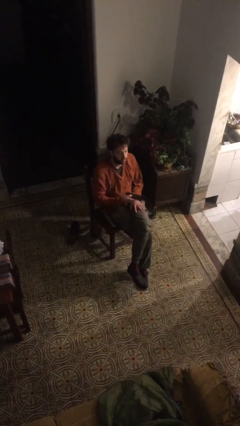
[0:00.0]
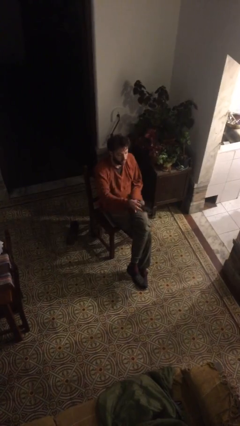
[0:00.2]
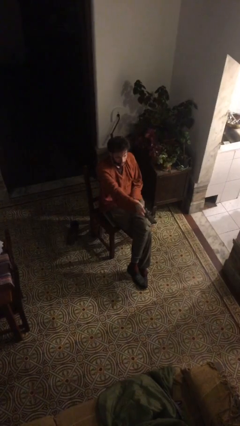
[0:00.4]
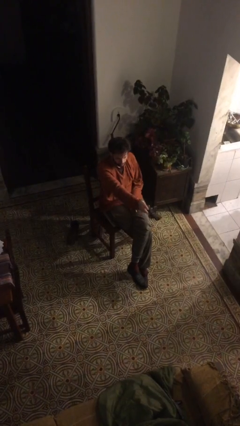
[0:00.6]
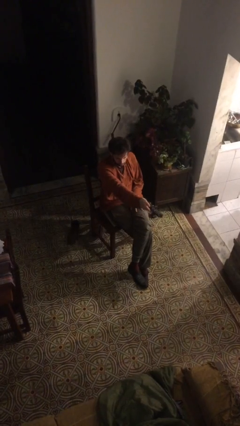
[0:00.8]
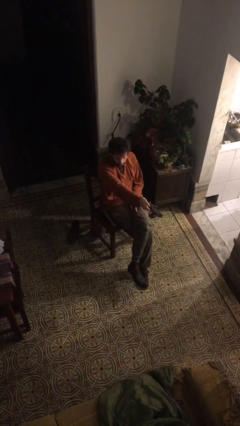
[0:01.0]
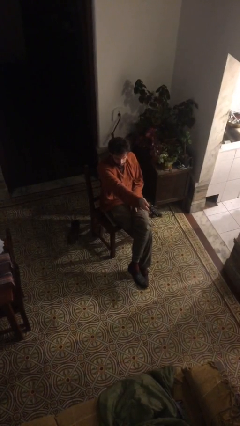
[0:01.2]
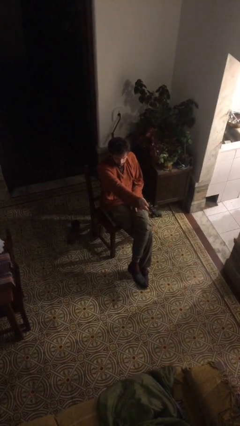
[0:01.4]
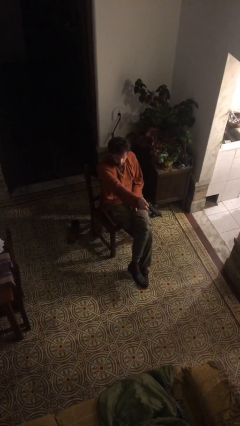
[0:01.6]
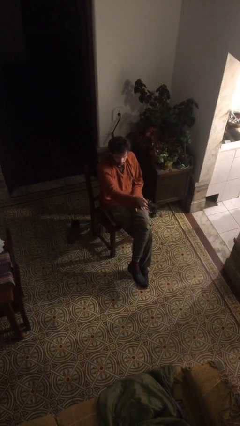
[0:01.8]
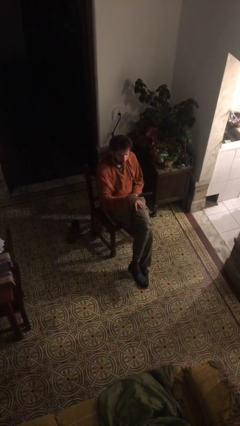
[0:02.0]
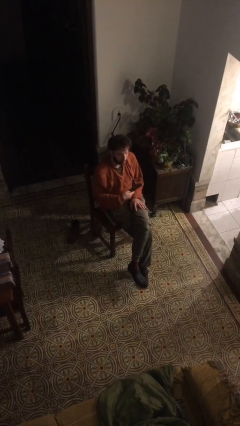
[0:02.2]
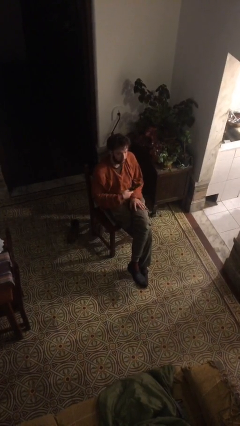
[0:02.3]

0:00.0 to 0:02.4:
person uses television remote

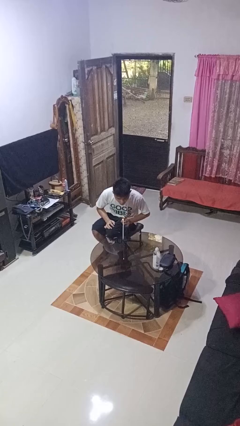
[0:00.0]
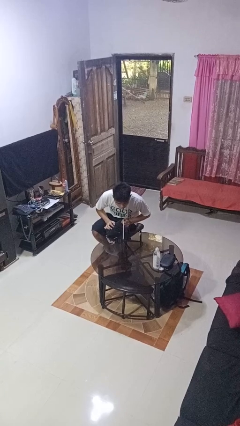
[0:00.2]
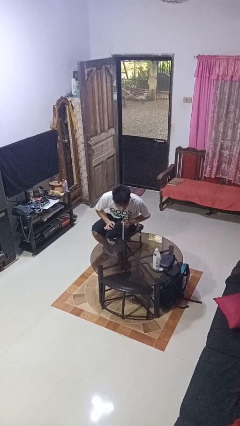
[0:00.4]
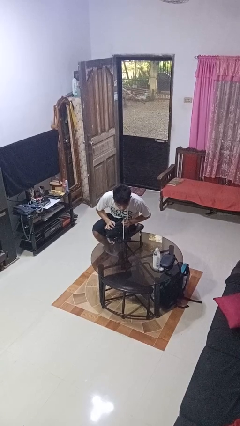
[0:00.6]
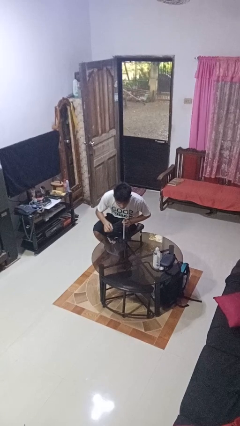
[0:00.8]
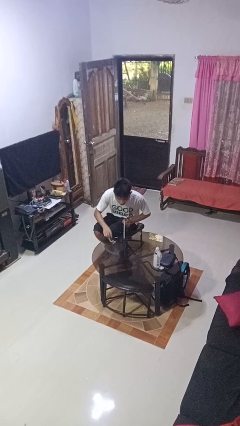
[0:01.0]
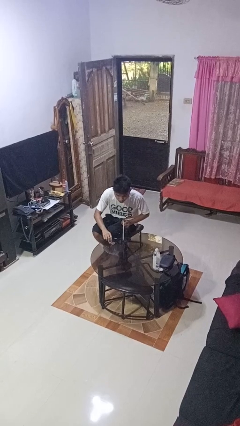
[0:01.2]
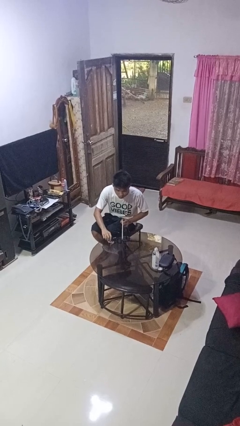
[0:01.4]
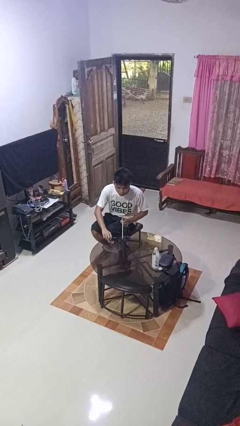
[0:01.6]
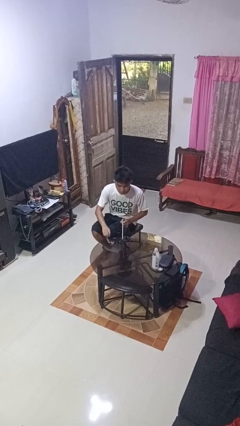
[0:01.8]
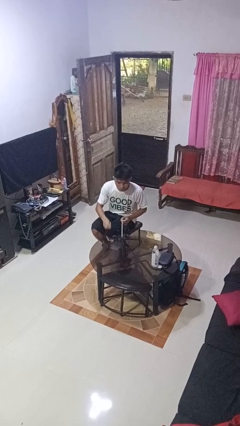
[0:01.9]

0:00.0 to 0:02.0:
person extinguishes candle

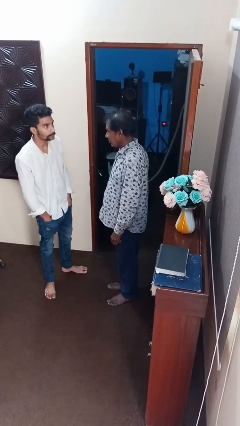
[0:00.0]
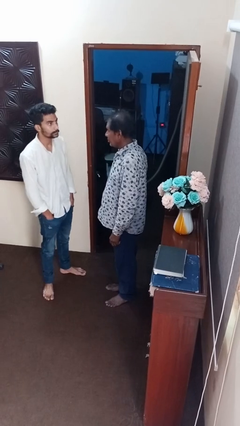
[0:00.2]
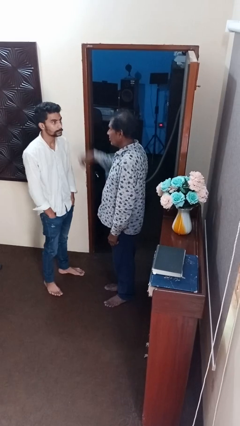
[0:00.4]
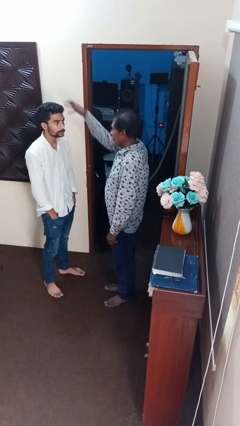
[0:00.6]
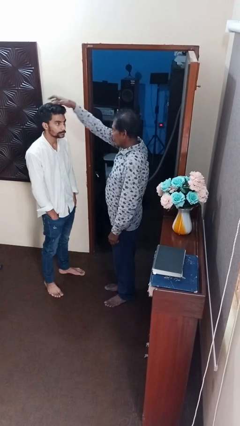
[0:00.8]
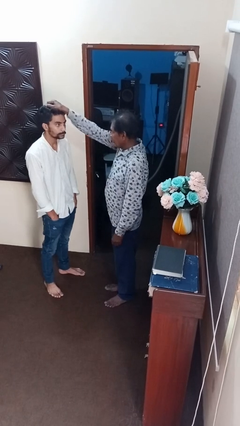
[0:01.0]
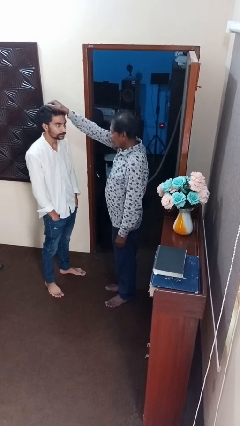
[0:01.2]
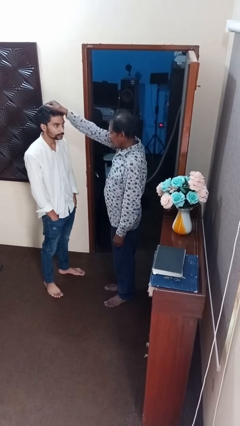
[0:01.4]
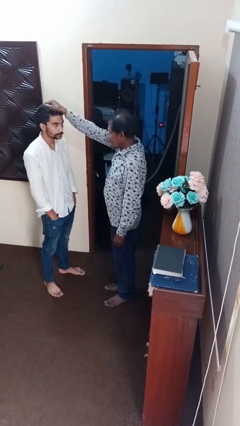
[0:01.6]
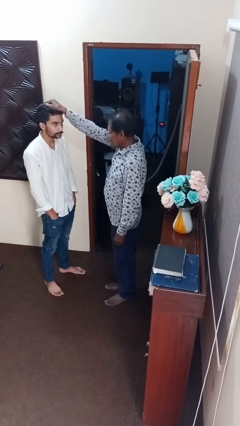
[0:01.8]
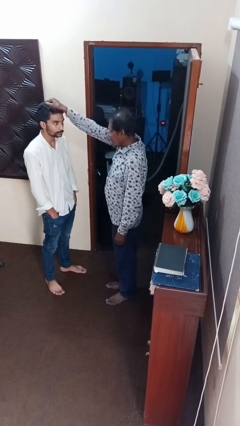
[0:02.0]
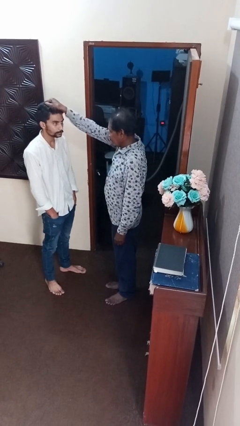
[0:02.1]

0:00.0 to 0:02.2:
person grabs person by hair

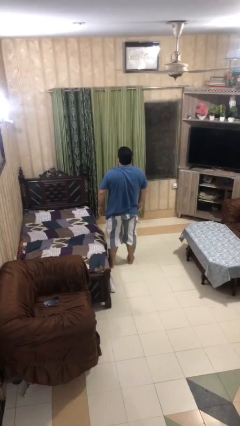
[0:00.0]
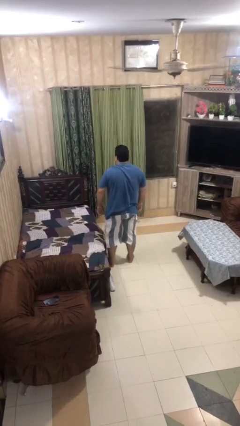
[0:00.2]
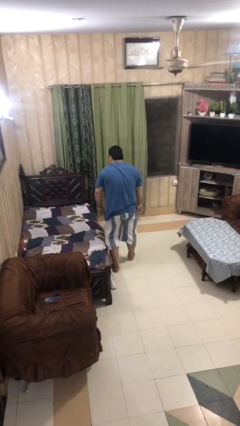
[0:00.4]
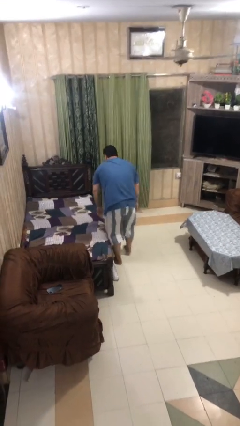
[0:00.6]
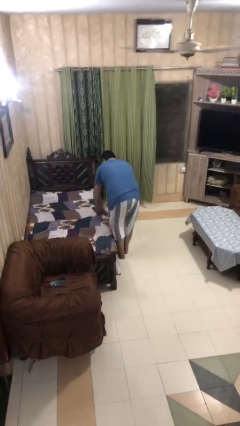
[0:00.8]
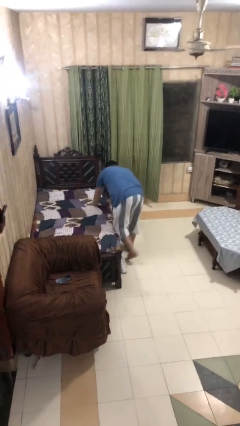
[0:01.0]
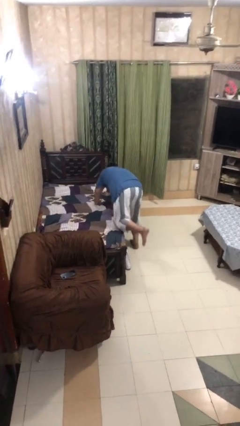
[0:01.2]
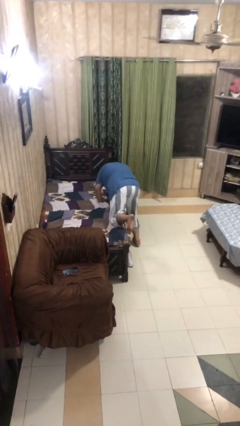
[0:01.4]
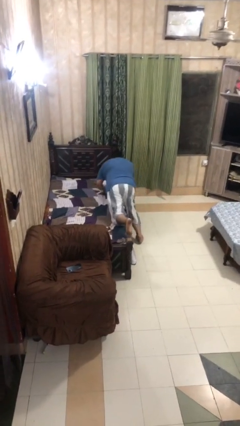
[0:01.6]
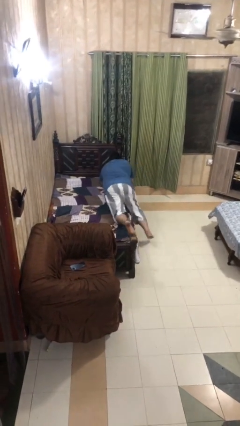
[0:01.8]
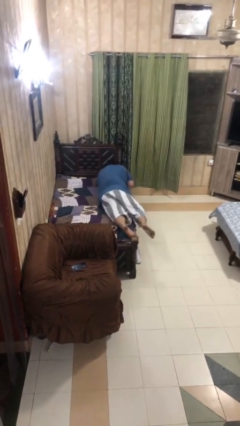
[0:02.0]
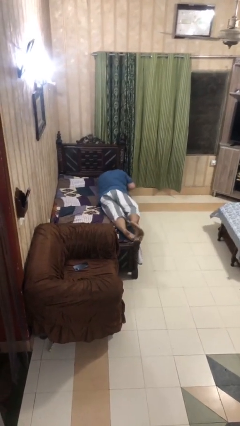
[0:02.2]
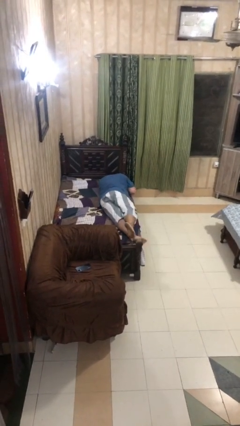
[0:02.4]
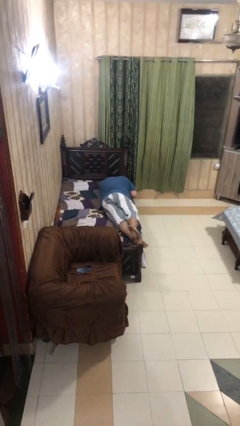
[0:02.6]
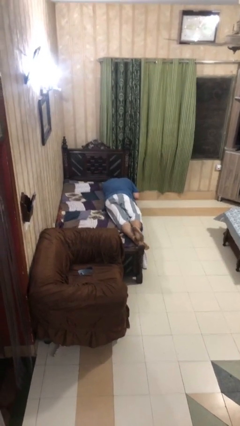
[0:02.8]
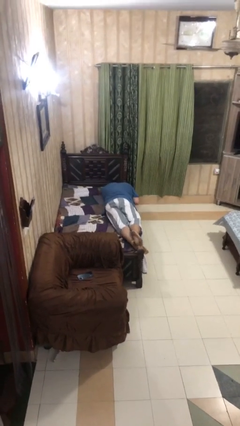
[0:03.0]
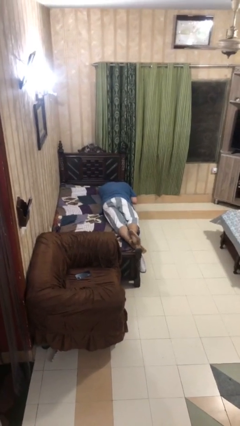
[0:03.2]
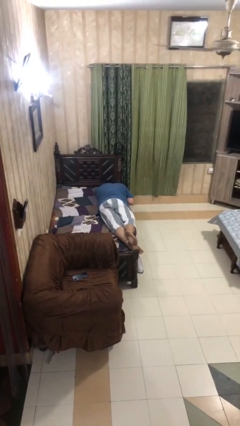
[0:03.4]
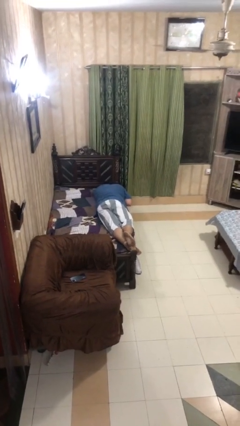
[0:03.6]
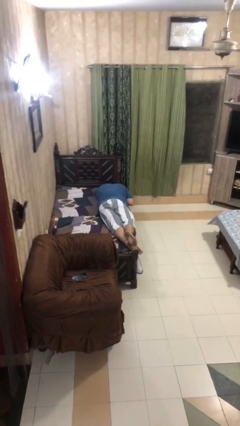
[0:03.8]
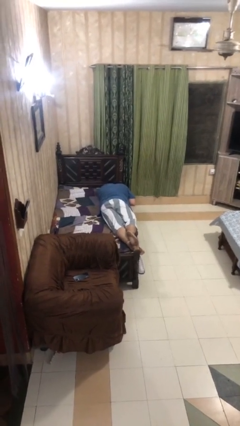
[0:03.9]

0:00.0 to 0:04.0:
person lies down on bed

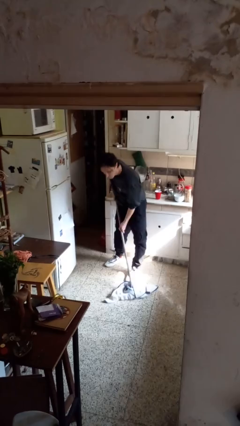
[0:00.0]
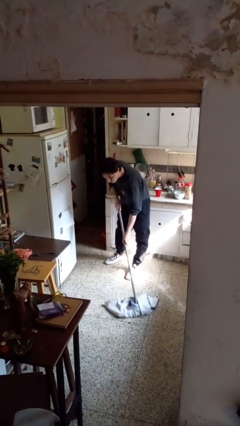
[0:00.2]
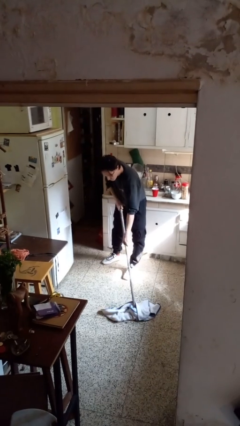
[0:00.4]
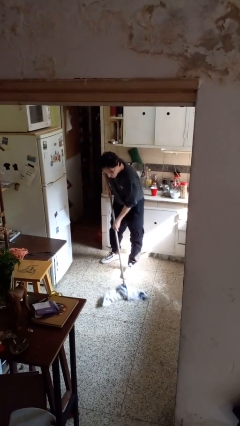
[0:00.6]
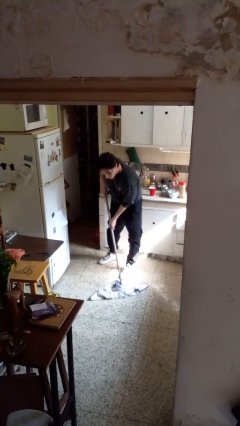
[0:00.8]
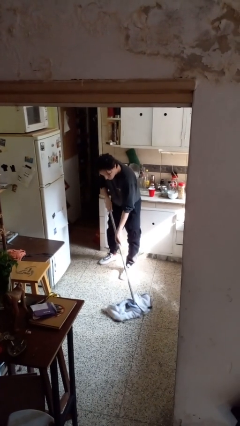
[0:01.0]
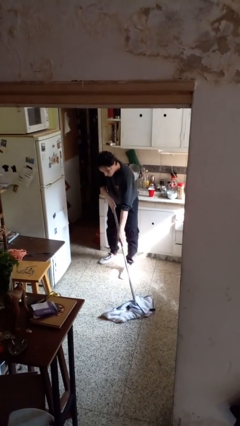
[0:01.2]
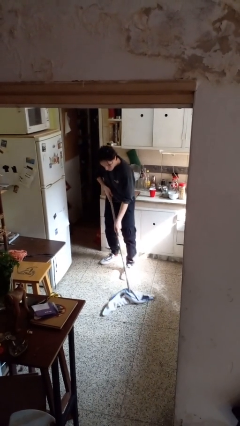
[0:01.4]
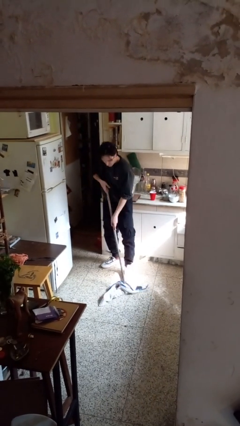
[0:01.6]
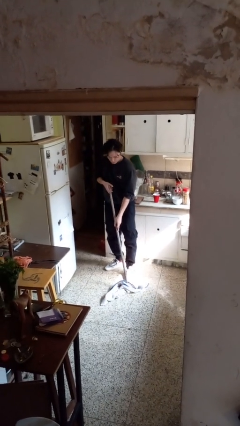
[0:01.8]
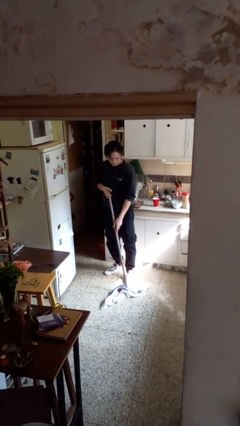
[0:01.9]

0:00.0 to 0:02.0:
person mops

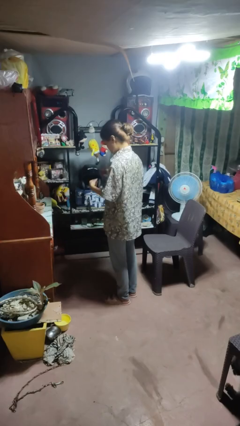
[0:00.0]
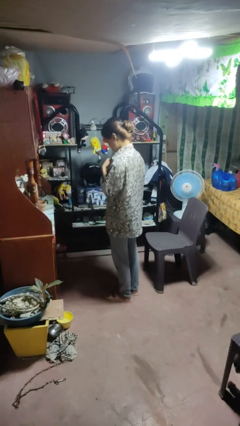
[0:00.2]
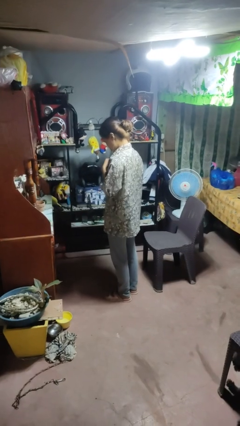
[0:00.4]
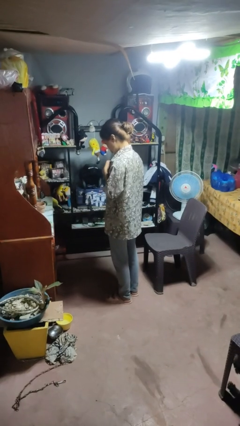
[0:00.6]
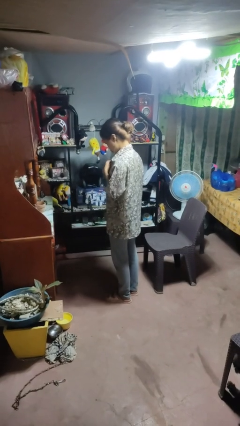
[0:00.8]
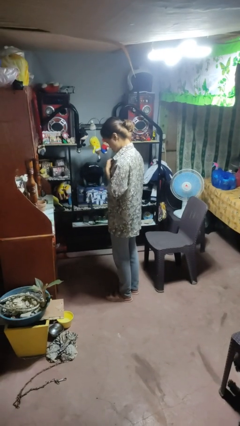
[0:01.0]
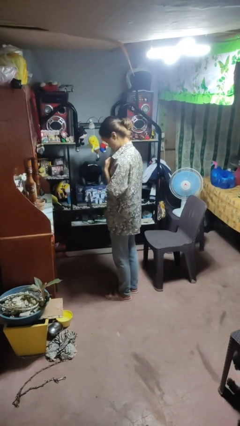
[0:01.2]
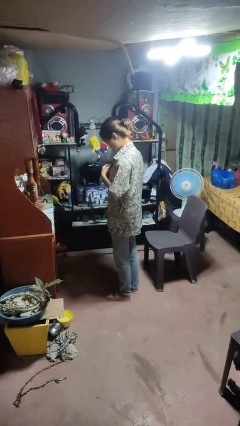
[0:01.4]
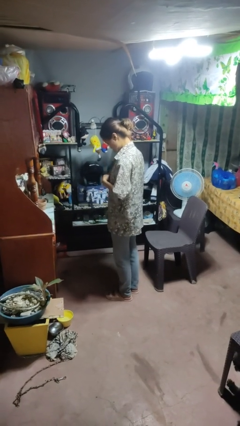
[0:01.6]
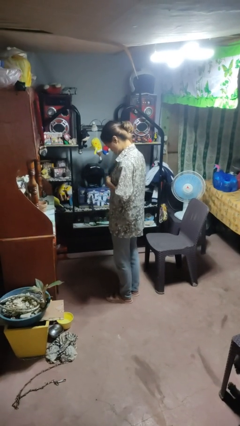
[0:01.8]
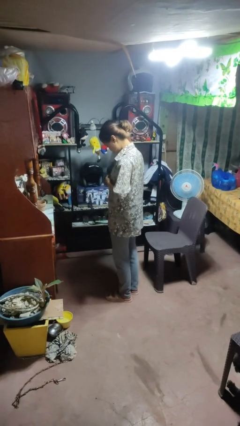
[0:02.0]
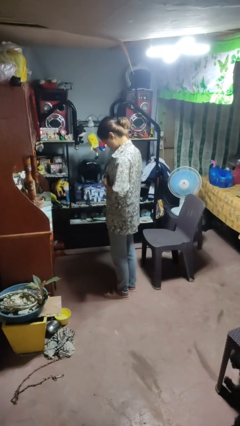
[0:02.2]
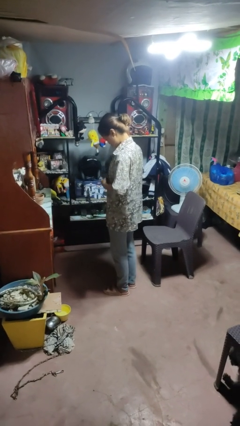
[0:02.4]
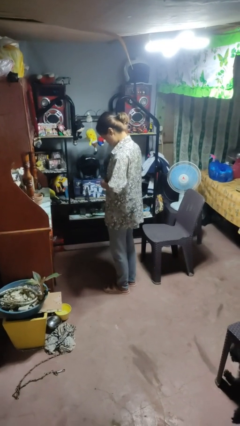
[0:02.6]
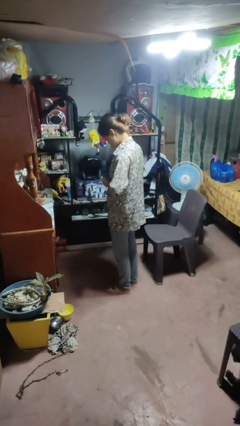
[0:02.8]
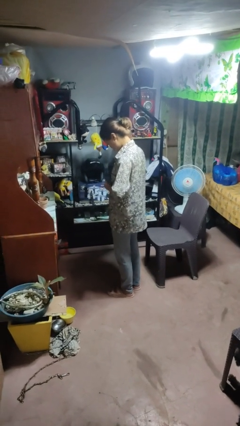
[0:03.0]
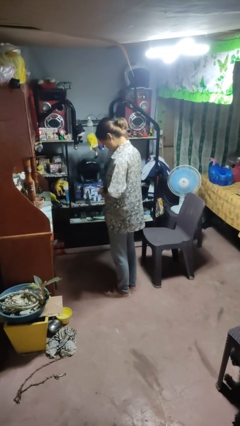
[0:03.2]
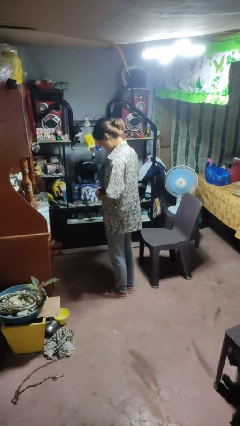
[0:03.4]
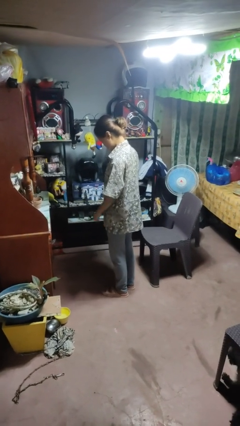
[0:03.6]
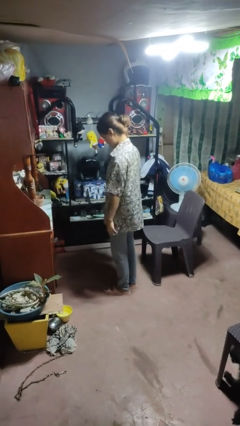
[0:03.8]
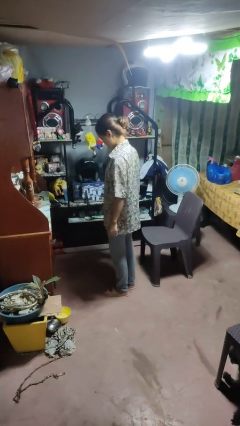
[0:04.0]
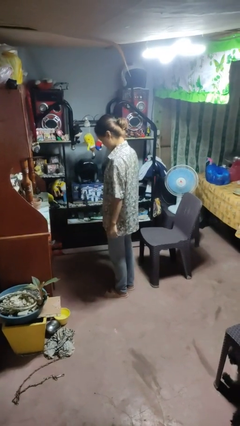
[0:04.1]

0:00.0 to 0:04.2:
person unbuttons shirt

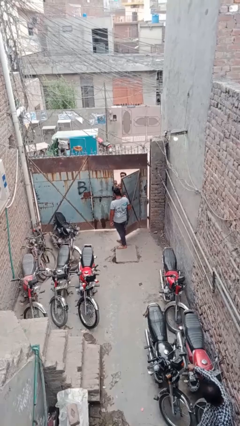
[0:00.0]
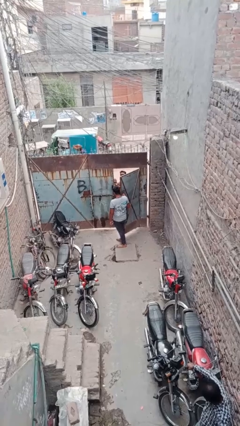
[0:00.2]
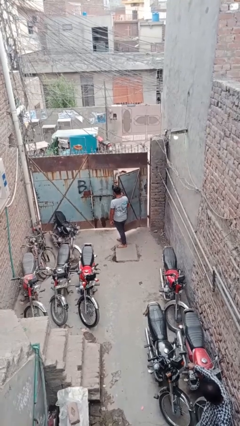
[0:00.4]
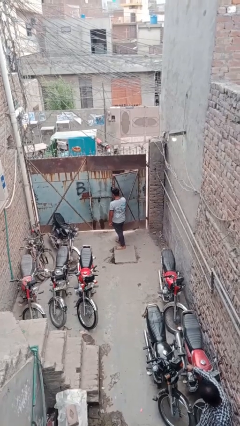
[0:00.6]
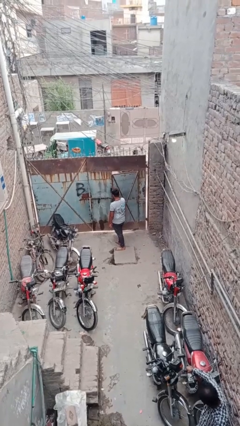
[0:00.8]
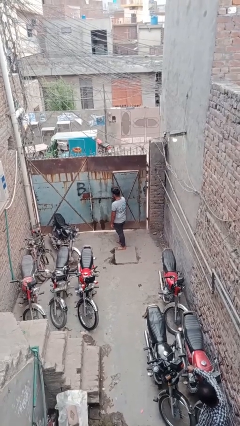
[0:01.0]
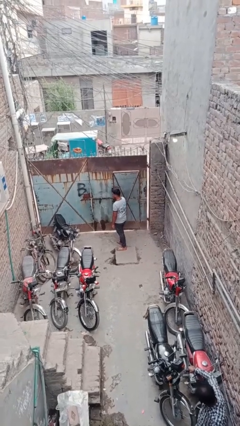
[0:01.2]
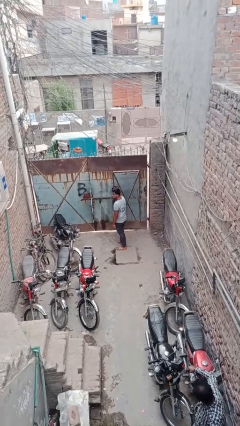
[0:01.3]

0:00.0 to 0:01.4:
person closes facility door
